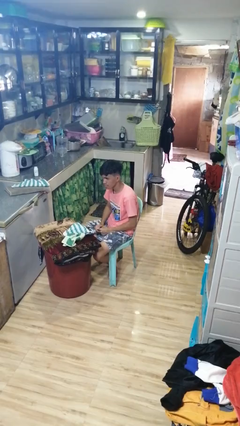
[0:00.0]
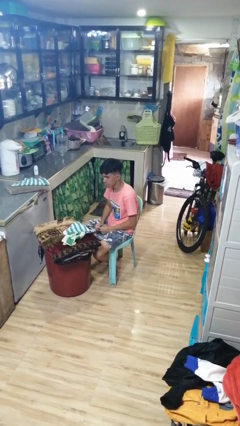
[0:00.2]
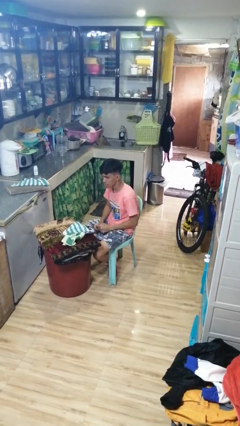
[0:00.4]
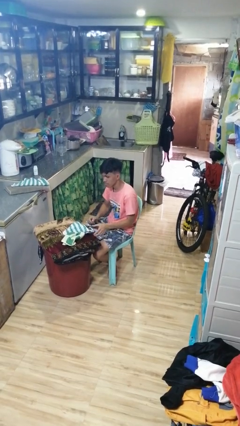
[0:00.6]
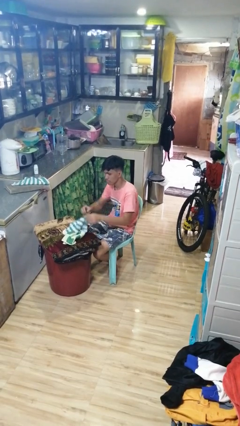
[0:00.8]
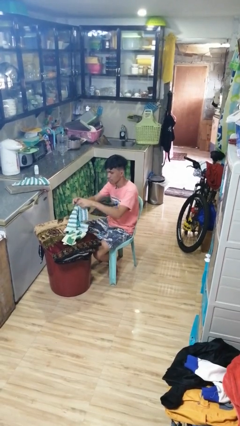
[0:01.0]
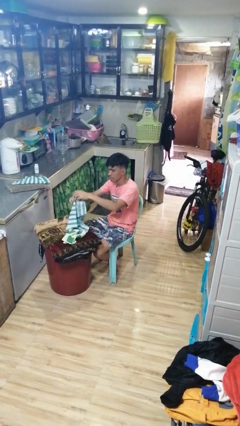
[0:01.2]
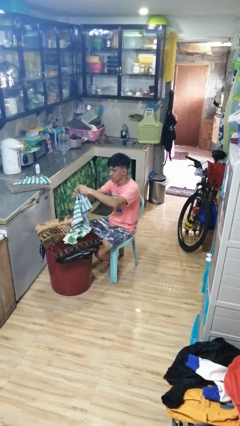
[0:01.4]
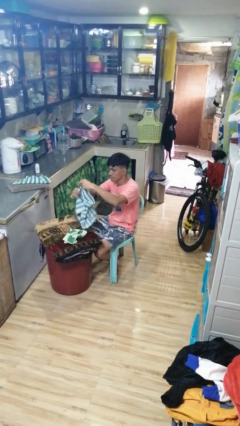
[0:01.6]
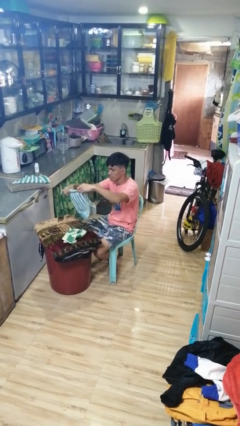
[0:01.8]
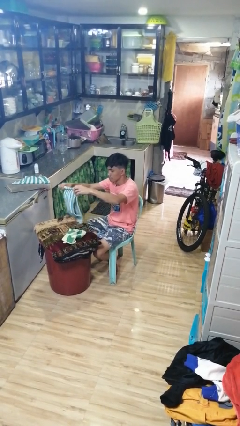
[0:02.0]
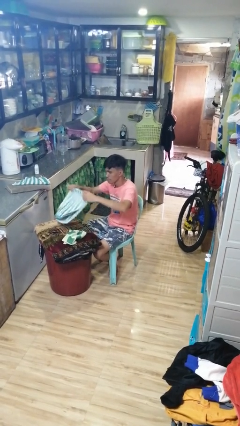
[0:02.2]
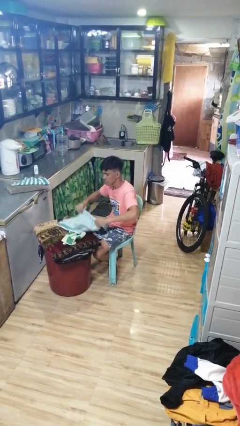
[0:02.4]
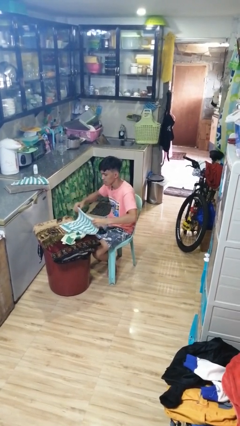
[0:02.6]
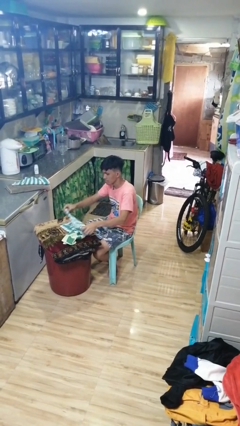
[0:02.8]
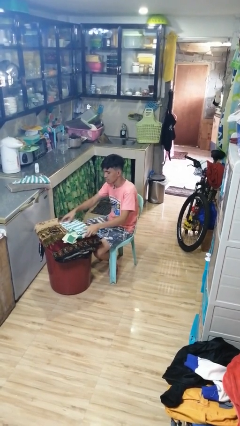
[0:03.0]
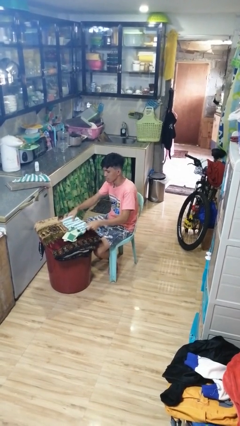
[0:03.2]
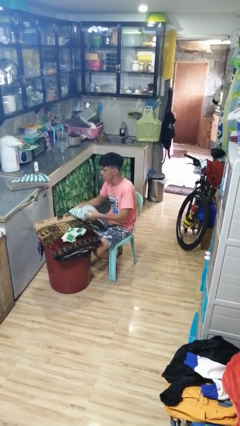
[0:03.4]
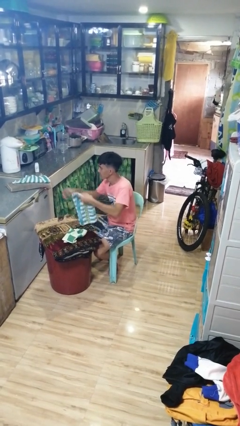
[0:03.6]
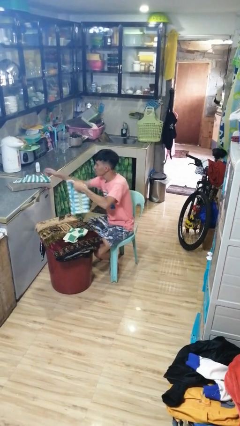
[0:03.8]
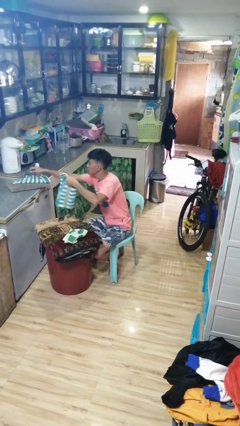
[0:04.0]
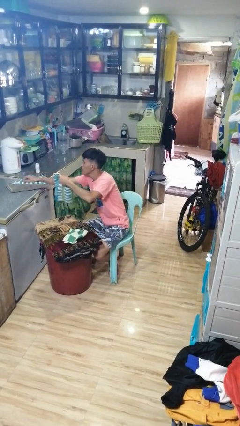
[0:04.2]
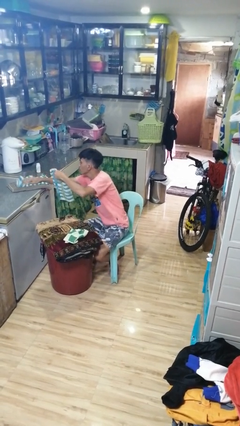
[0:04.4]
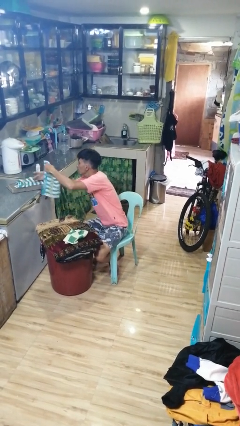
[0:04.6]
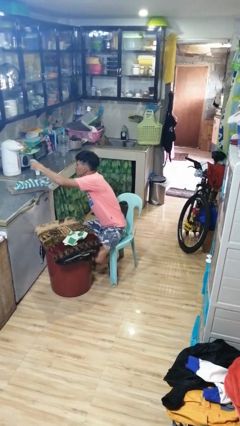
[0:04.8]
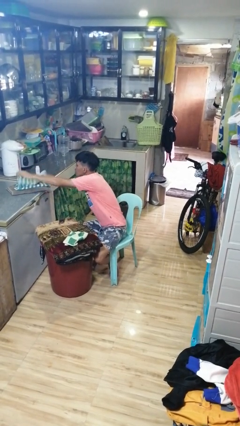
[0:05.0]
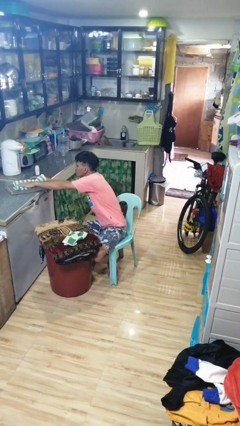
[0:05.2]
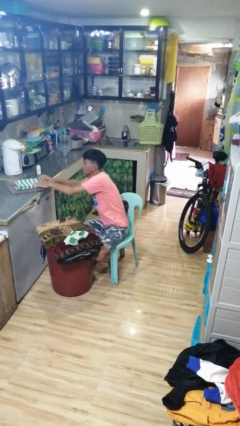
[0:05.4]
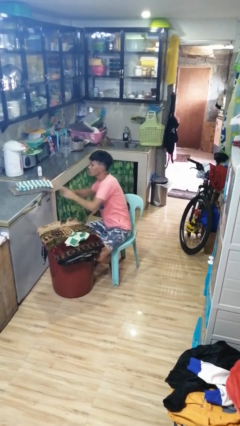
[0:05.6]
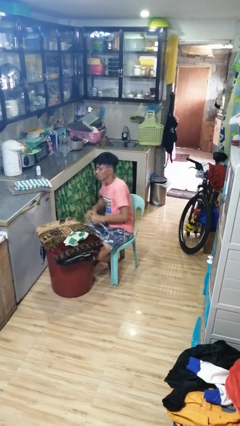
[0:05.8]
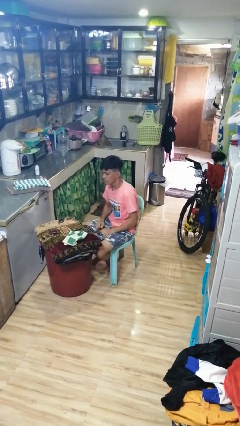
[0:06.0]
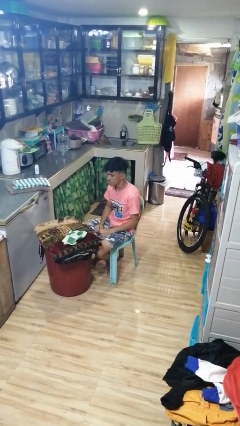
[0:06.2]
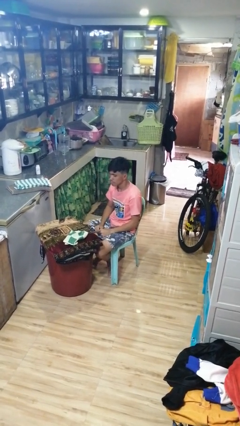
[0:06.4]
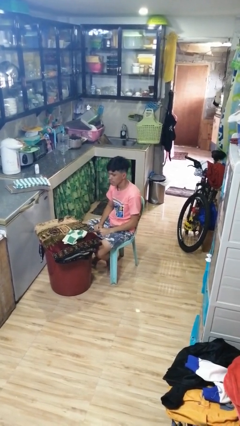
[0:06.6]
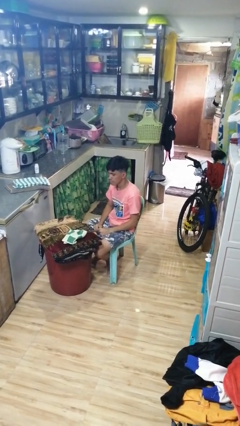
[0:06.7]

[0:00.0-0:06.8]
person folds towel

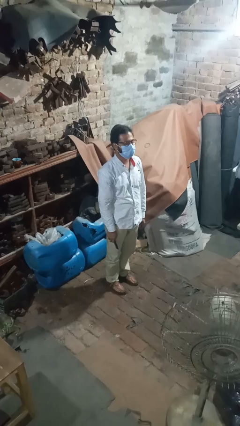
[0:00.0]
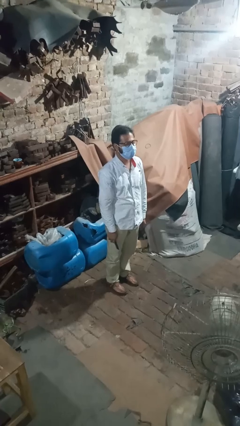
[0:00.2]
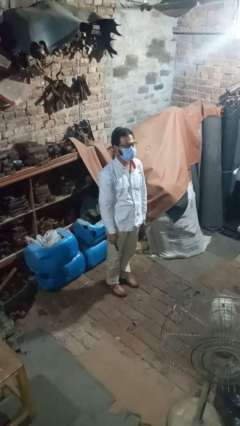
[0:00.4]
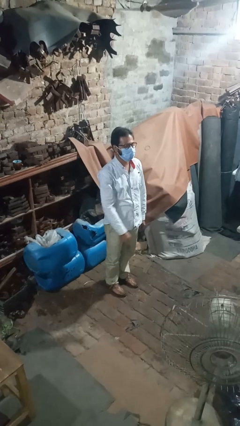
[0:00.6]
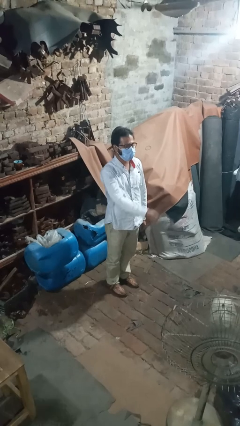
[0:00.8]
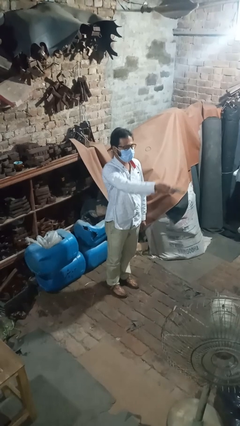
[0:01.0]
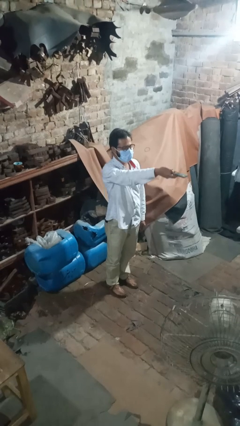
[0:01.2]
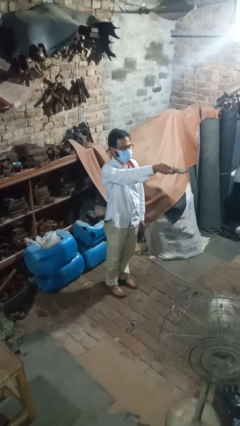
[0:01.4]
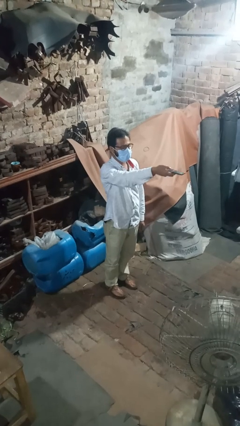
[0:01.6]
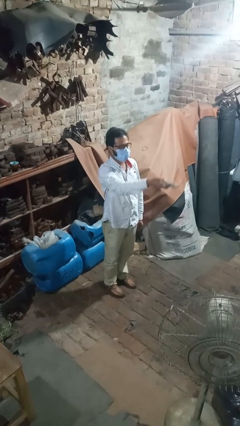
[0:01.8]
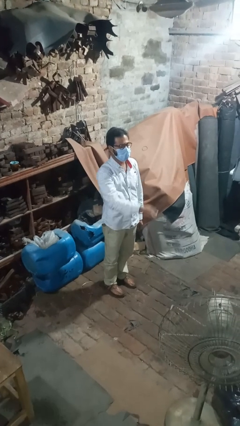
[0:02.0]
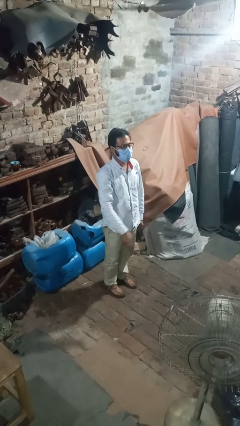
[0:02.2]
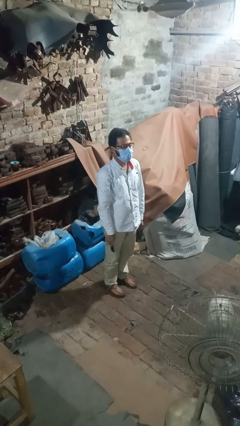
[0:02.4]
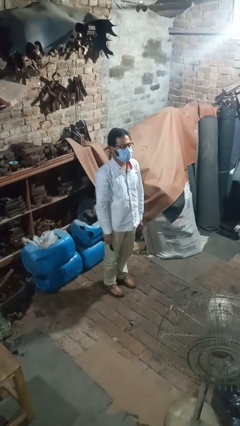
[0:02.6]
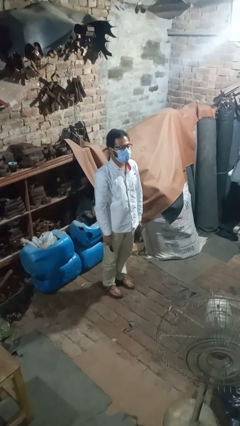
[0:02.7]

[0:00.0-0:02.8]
person uses television remote

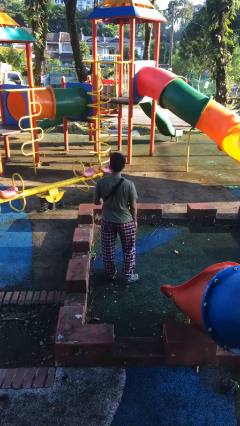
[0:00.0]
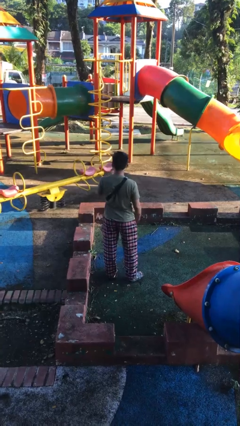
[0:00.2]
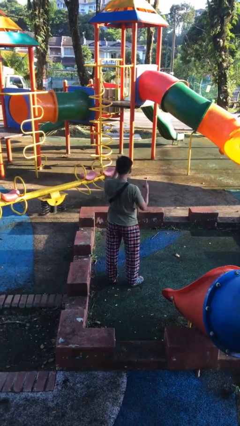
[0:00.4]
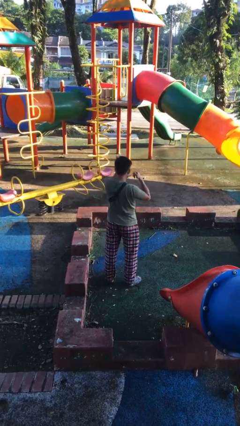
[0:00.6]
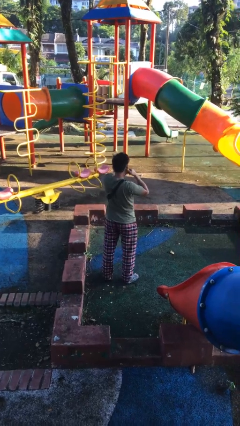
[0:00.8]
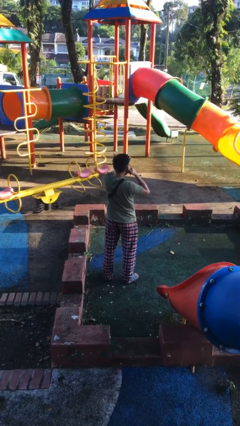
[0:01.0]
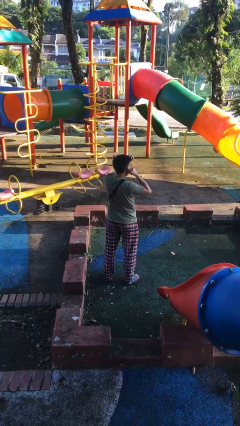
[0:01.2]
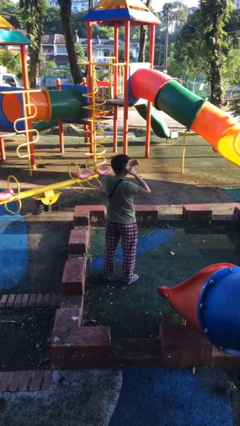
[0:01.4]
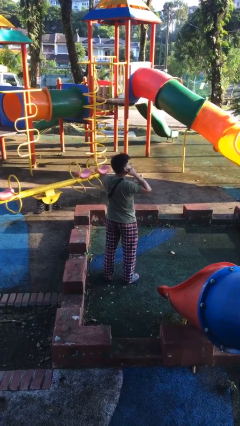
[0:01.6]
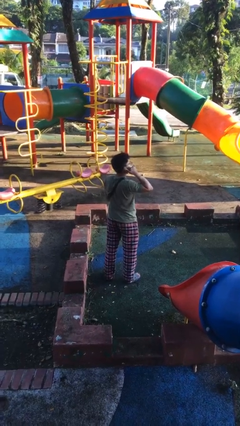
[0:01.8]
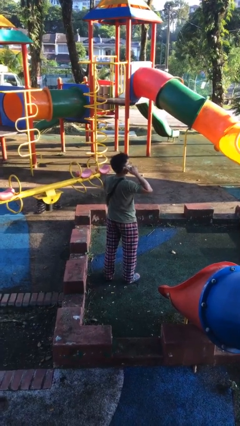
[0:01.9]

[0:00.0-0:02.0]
person gestures call me

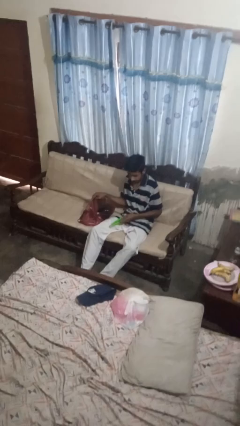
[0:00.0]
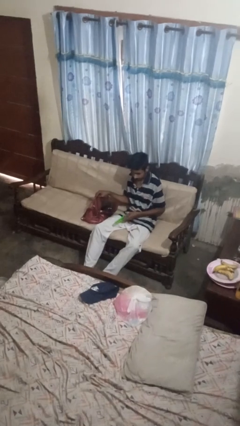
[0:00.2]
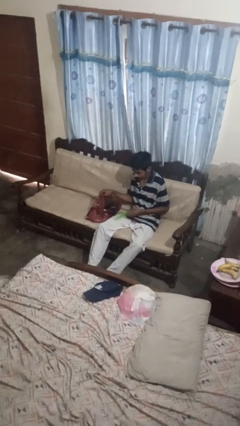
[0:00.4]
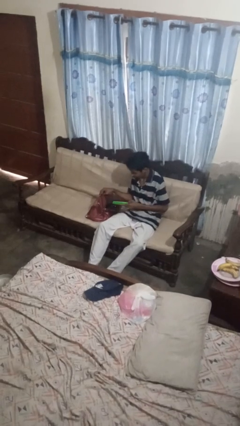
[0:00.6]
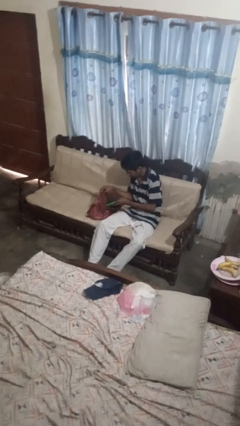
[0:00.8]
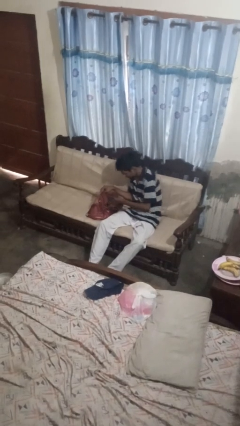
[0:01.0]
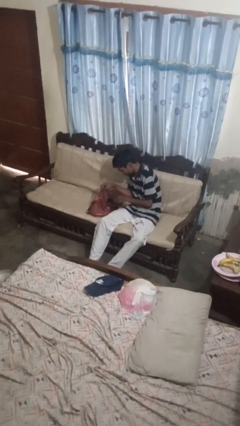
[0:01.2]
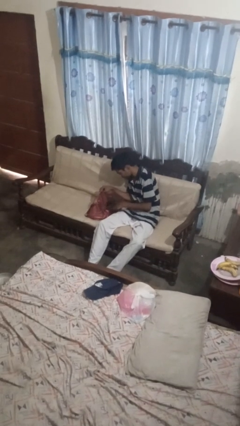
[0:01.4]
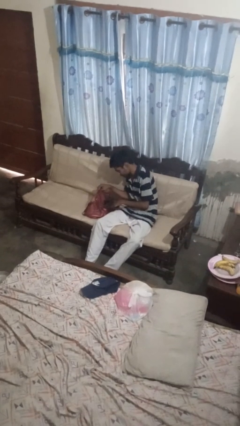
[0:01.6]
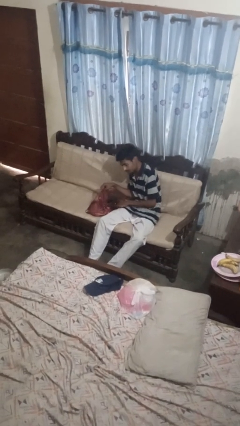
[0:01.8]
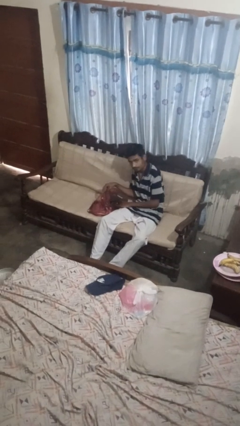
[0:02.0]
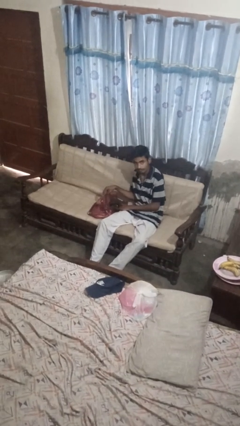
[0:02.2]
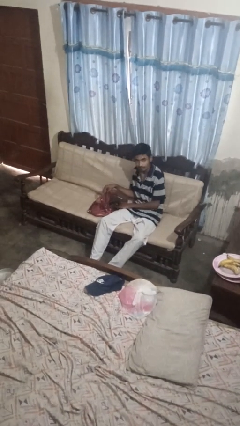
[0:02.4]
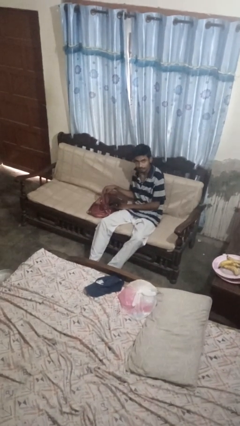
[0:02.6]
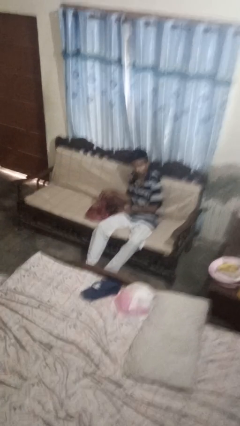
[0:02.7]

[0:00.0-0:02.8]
person puts object into purse

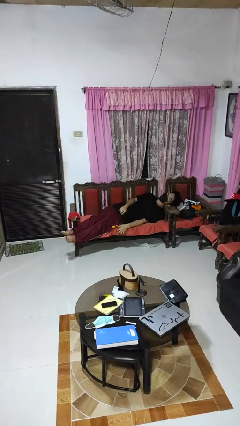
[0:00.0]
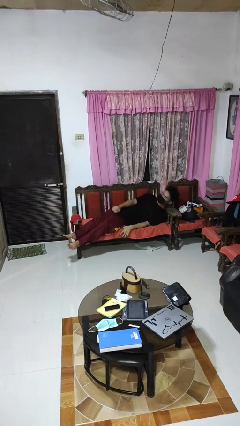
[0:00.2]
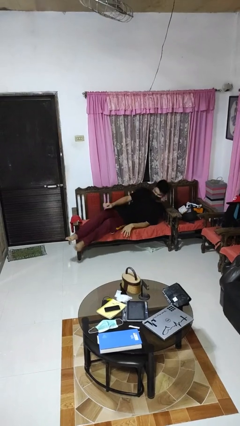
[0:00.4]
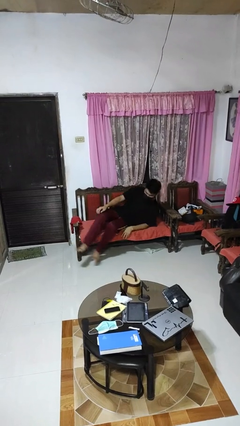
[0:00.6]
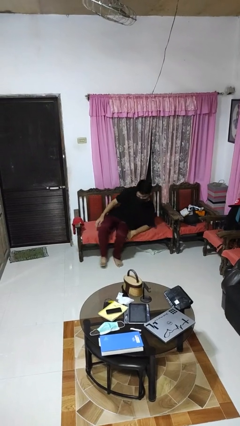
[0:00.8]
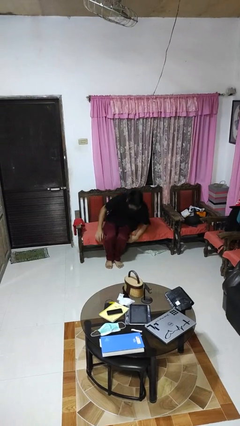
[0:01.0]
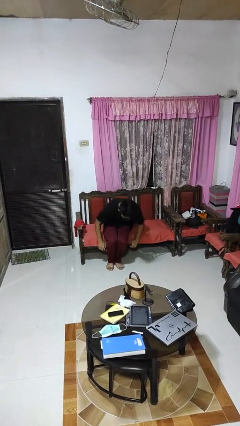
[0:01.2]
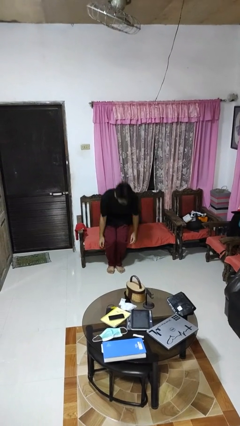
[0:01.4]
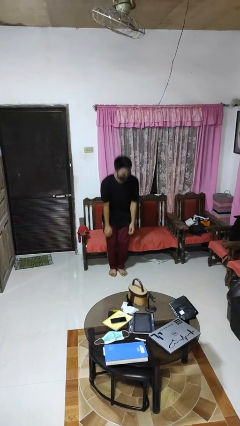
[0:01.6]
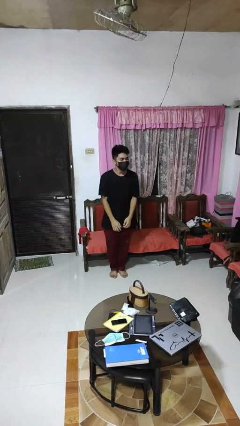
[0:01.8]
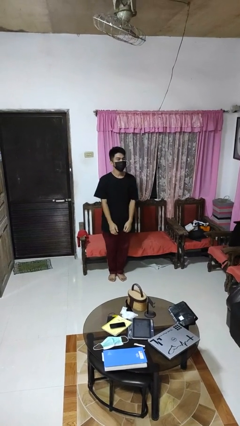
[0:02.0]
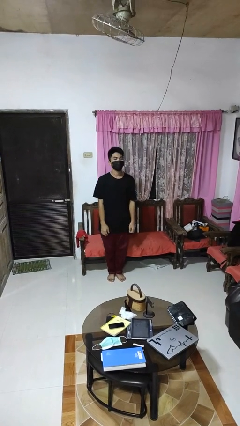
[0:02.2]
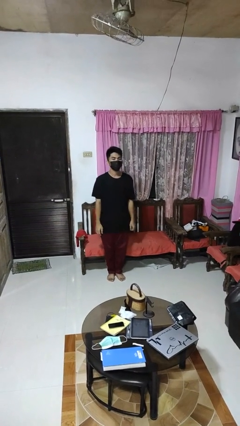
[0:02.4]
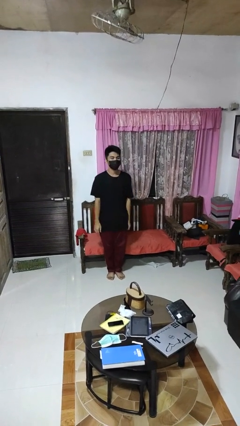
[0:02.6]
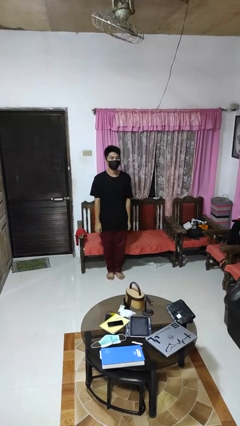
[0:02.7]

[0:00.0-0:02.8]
person stands up
